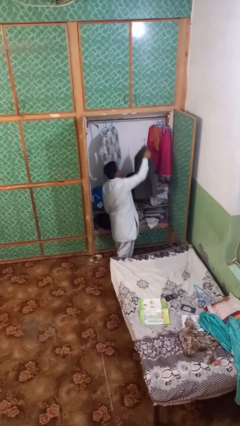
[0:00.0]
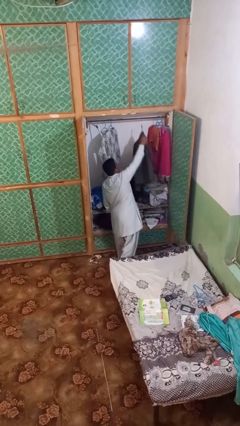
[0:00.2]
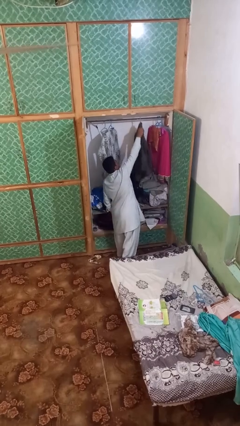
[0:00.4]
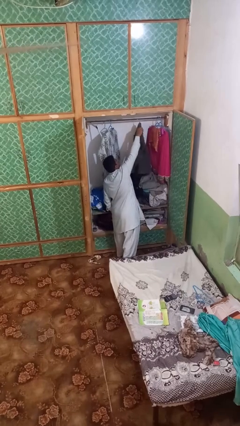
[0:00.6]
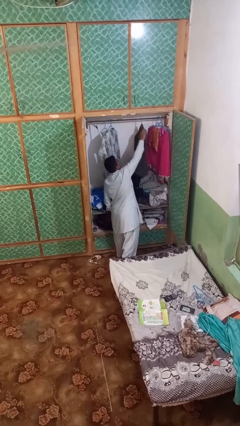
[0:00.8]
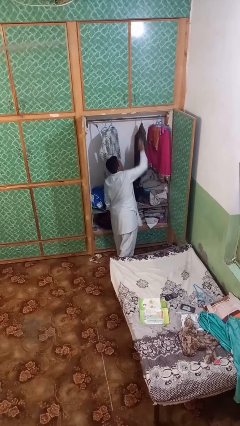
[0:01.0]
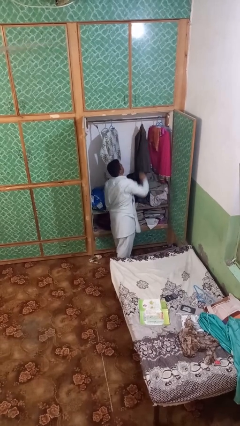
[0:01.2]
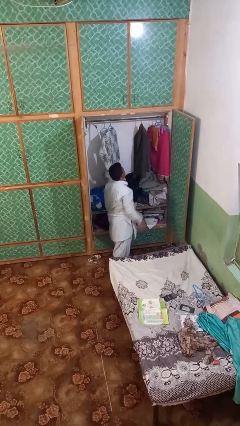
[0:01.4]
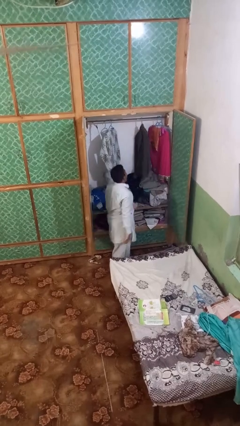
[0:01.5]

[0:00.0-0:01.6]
person puts clothes into closet

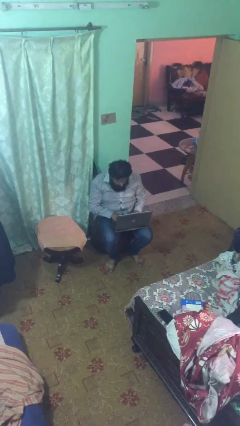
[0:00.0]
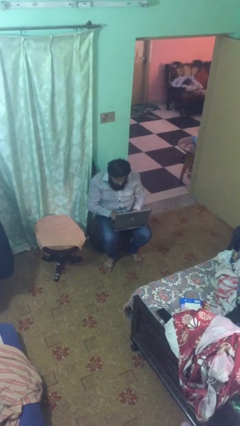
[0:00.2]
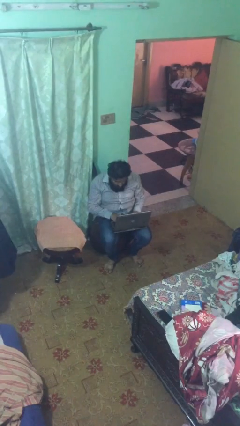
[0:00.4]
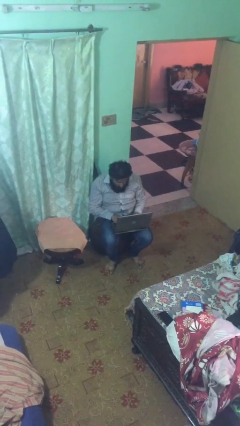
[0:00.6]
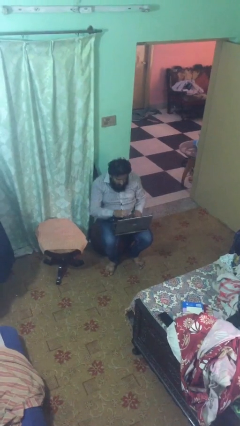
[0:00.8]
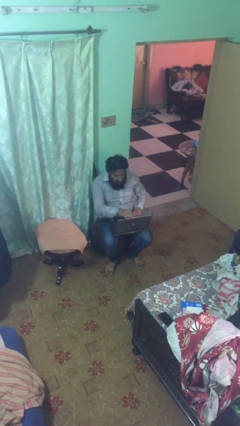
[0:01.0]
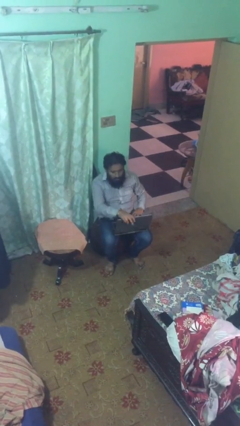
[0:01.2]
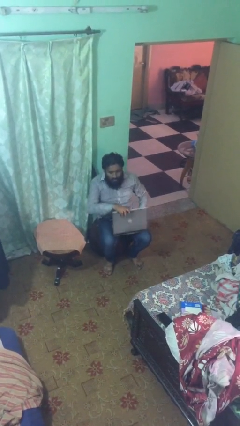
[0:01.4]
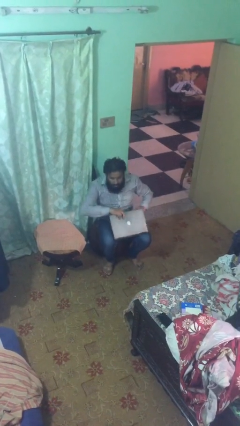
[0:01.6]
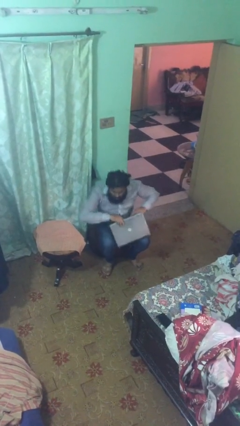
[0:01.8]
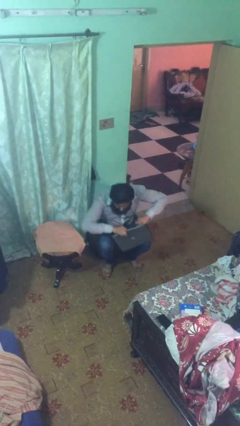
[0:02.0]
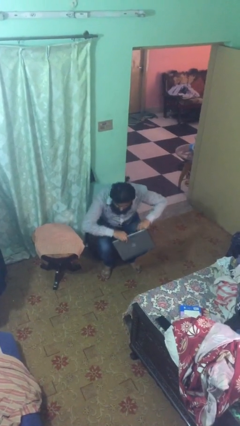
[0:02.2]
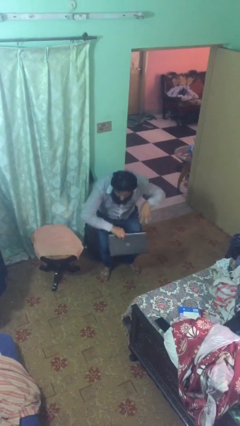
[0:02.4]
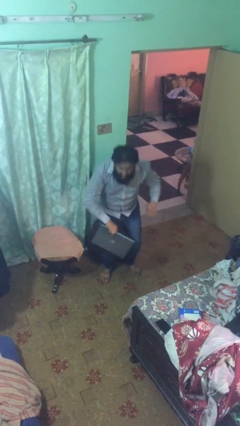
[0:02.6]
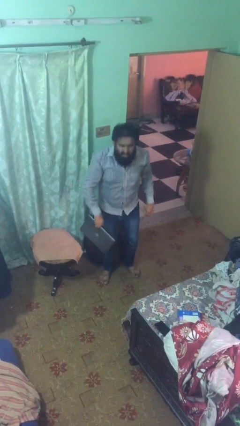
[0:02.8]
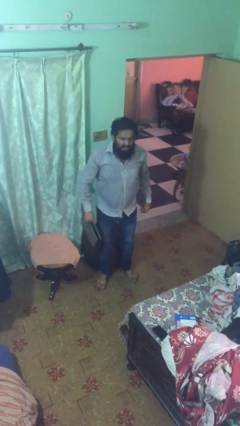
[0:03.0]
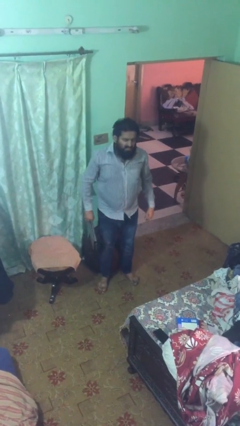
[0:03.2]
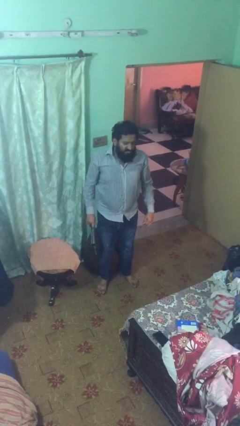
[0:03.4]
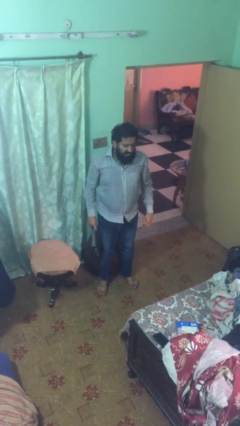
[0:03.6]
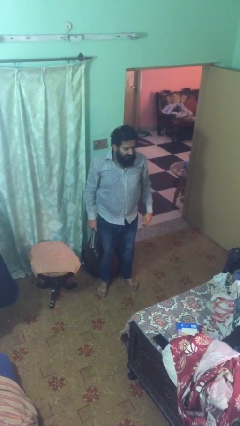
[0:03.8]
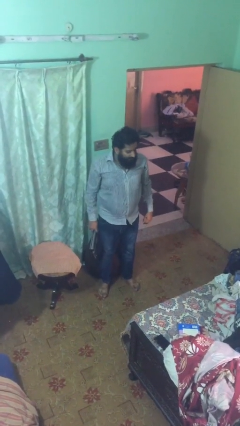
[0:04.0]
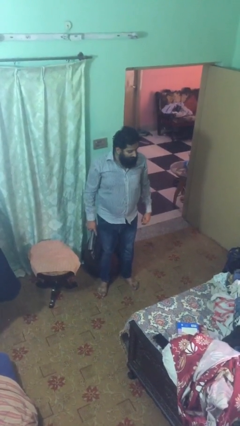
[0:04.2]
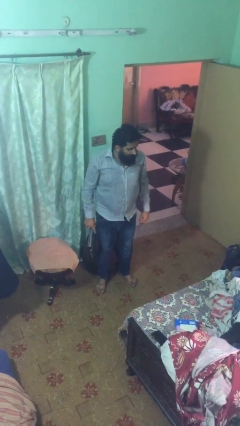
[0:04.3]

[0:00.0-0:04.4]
person stands up

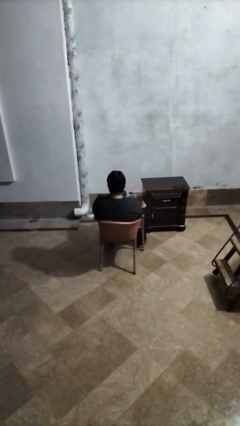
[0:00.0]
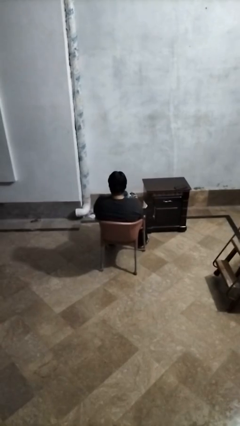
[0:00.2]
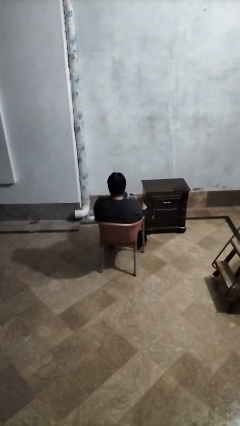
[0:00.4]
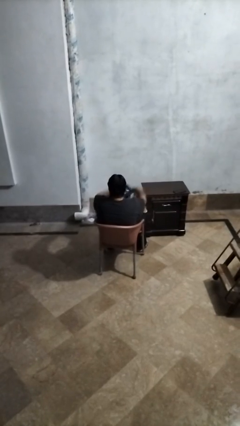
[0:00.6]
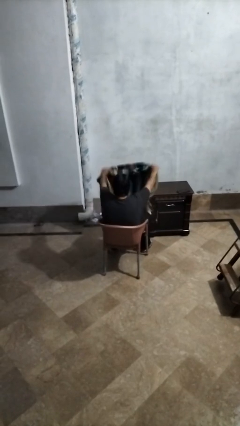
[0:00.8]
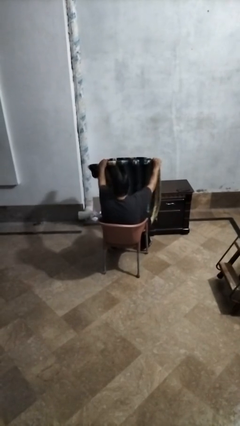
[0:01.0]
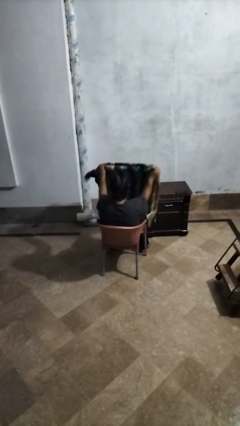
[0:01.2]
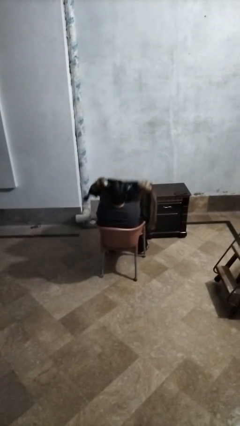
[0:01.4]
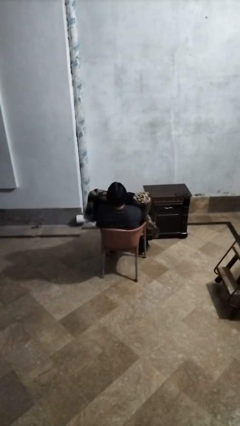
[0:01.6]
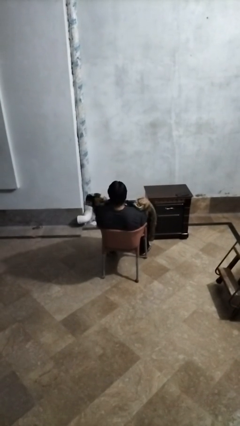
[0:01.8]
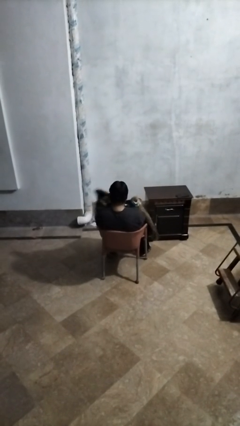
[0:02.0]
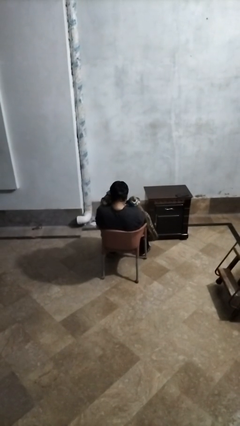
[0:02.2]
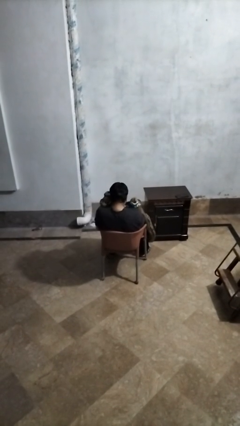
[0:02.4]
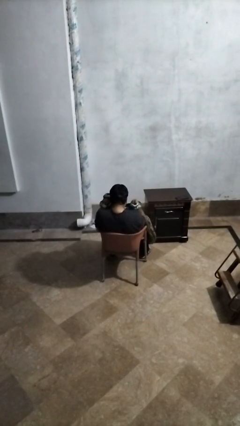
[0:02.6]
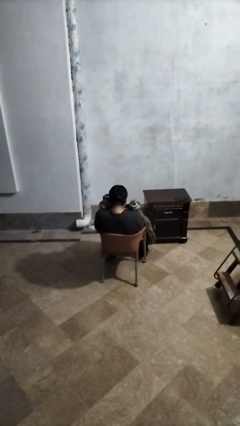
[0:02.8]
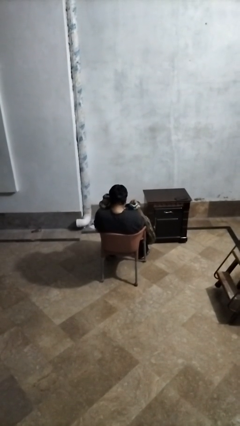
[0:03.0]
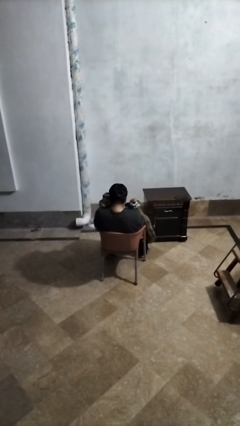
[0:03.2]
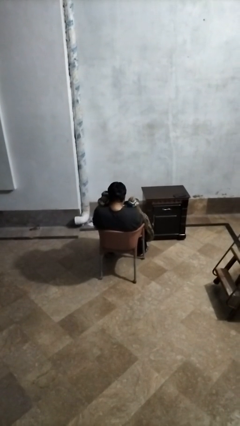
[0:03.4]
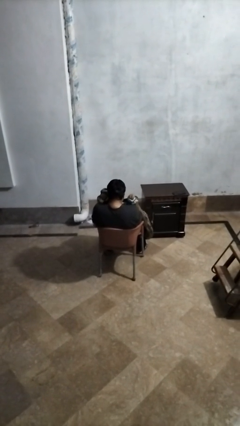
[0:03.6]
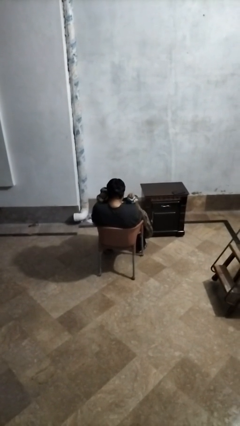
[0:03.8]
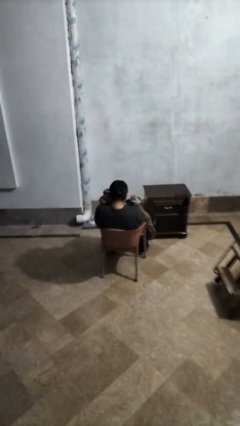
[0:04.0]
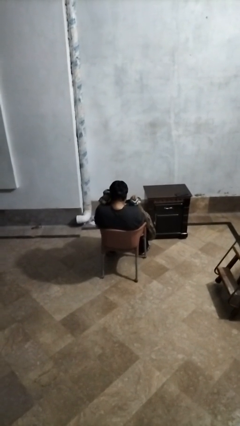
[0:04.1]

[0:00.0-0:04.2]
person covers with blanket

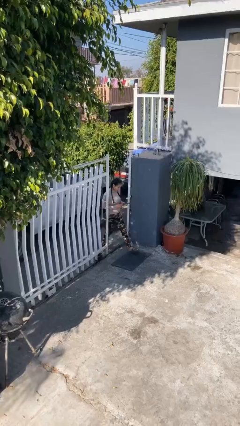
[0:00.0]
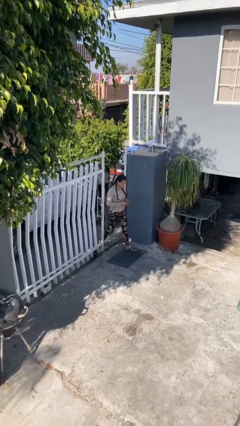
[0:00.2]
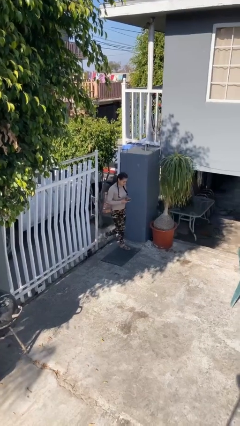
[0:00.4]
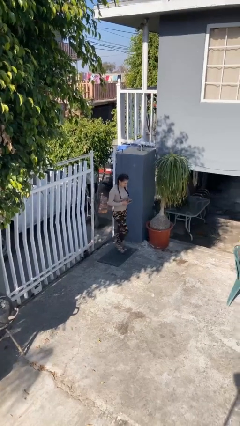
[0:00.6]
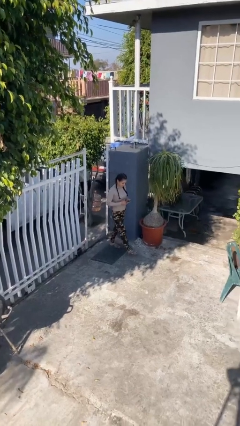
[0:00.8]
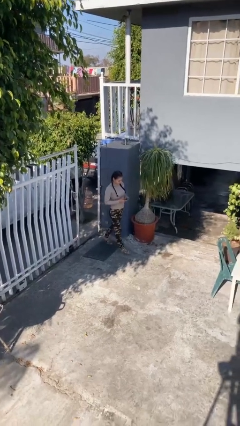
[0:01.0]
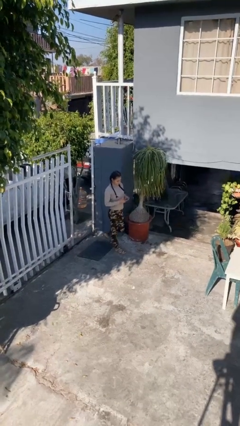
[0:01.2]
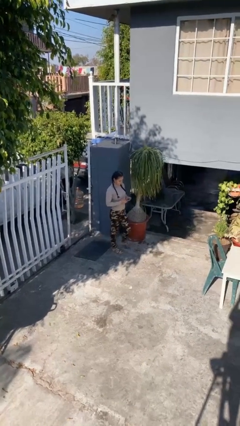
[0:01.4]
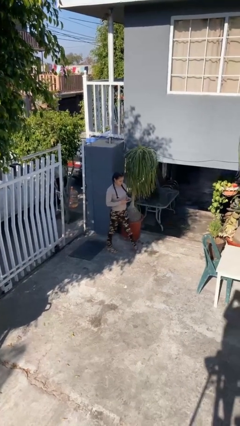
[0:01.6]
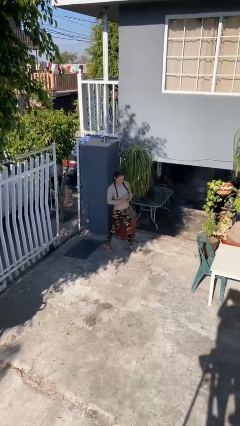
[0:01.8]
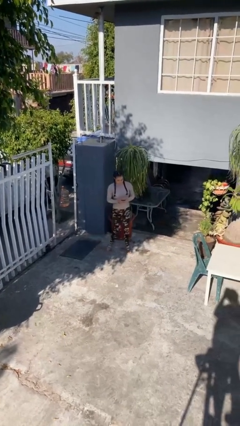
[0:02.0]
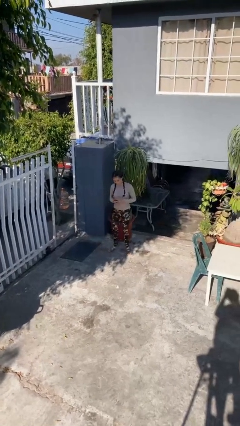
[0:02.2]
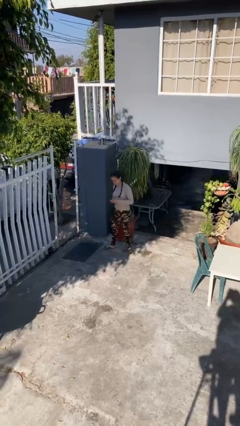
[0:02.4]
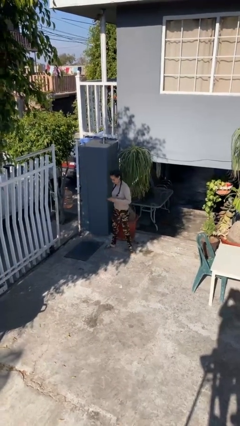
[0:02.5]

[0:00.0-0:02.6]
person enters scene through structure

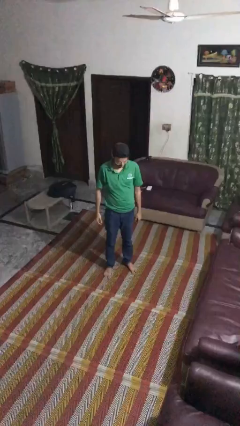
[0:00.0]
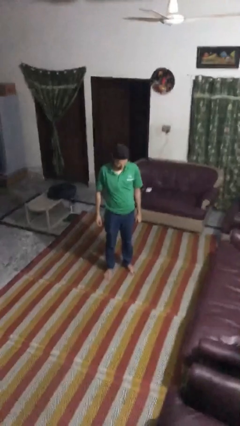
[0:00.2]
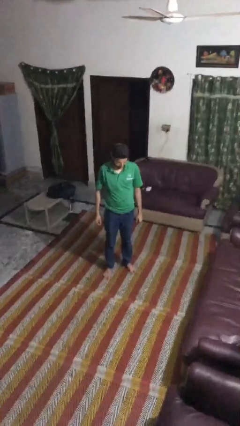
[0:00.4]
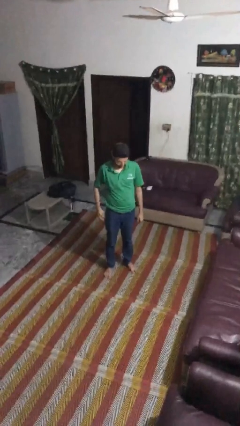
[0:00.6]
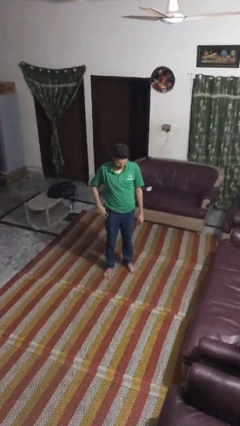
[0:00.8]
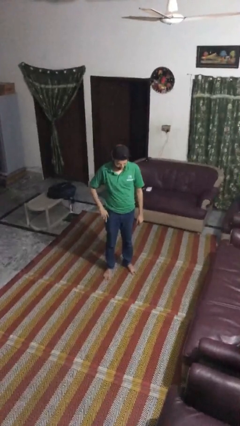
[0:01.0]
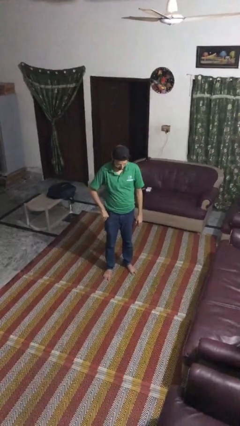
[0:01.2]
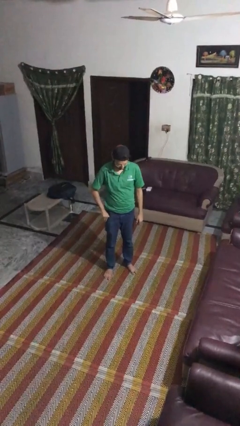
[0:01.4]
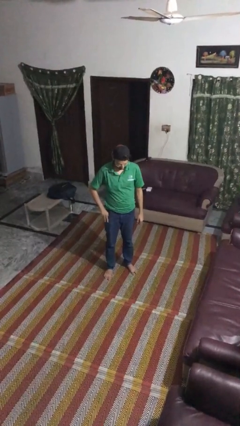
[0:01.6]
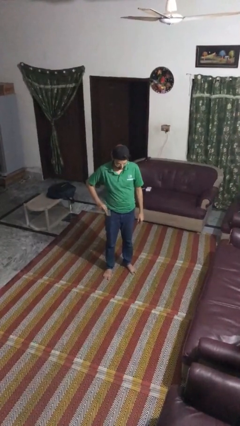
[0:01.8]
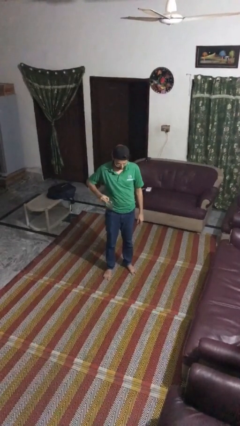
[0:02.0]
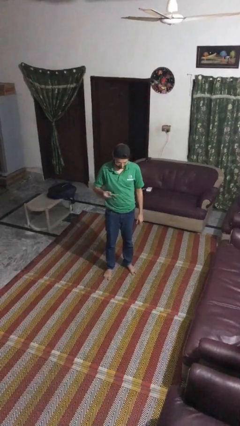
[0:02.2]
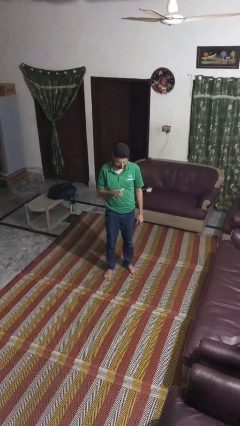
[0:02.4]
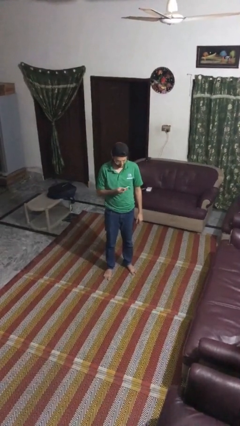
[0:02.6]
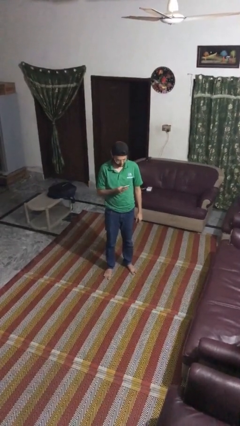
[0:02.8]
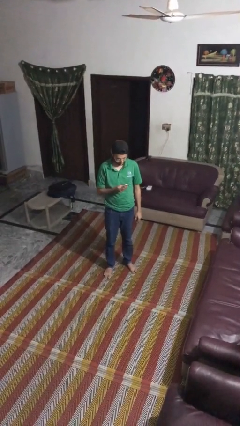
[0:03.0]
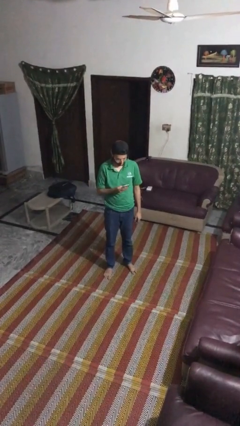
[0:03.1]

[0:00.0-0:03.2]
person takes phone from pocket

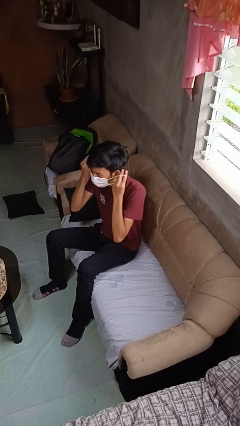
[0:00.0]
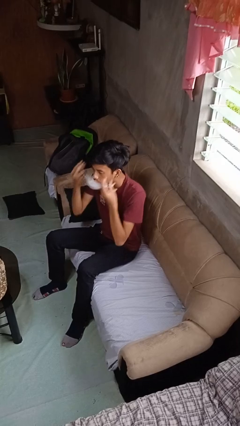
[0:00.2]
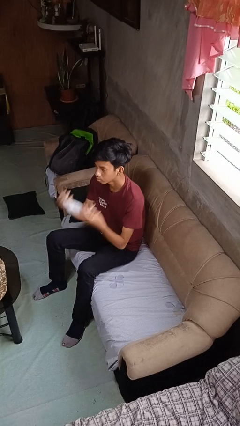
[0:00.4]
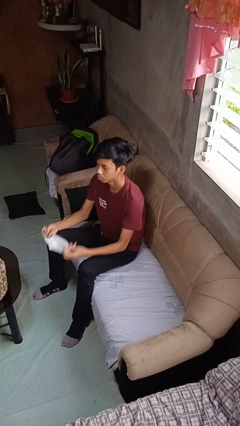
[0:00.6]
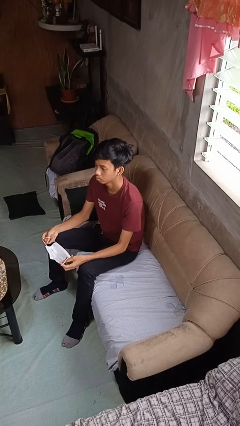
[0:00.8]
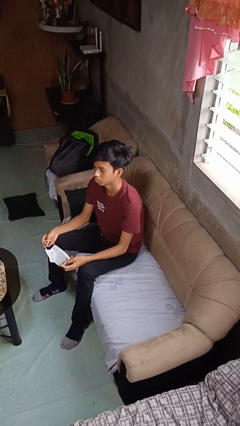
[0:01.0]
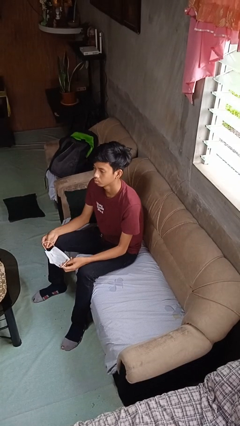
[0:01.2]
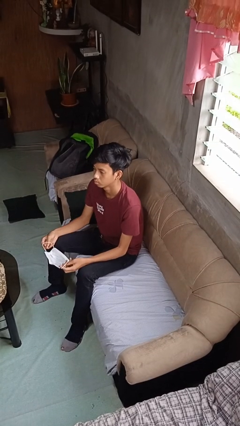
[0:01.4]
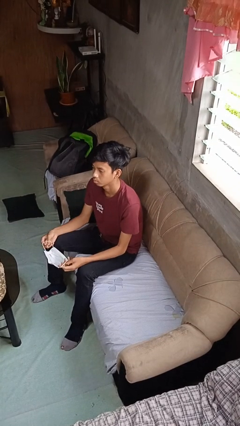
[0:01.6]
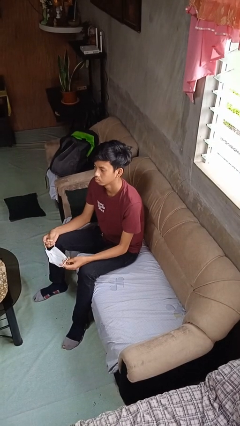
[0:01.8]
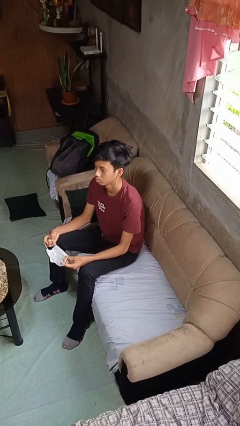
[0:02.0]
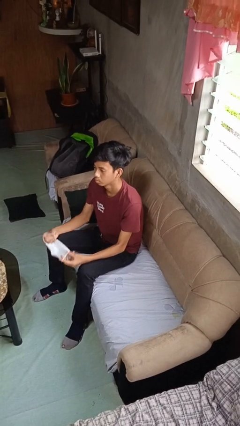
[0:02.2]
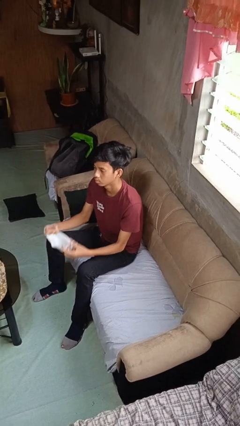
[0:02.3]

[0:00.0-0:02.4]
person takes off facemask
